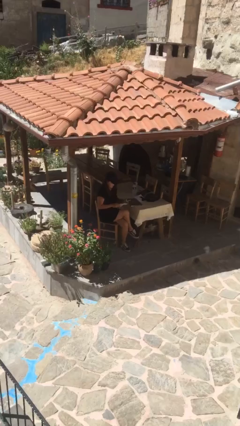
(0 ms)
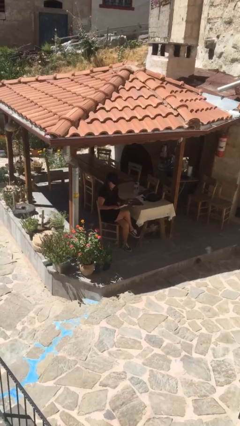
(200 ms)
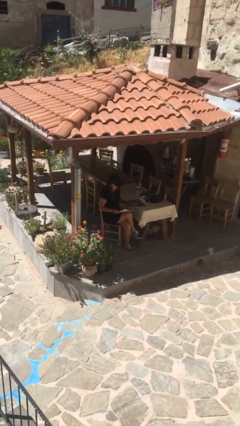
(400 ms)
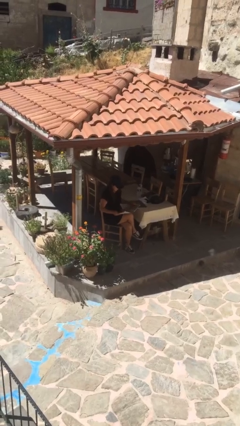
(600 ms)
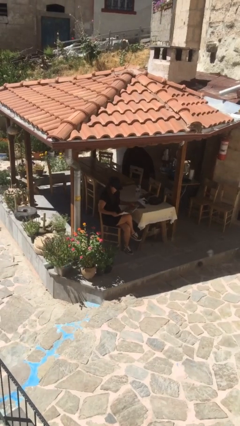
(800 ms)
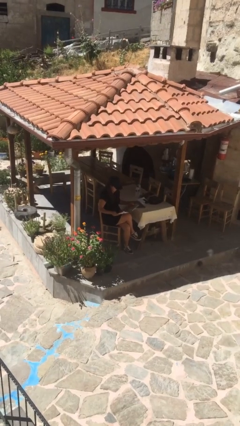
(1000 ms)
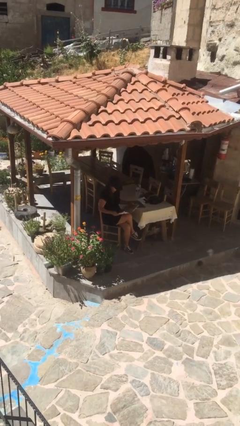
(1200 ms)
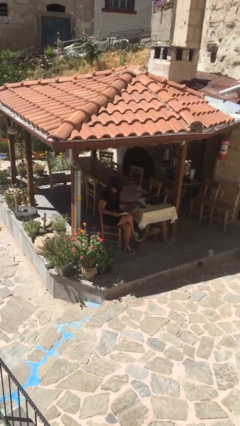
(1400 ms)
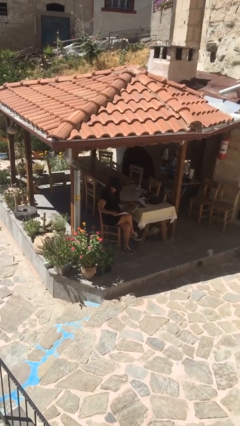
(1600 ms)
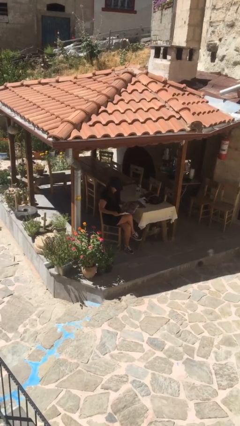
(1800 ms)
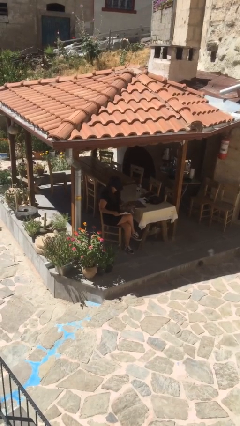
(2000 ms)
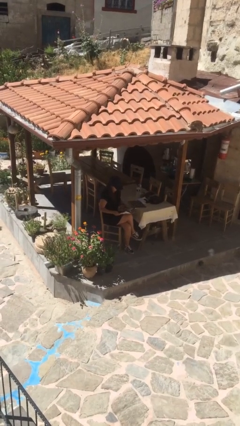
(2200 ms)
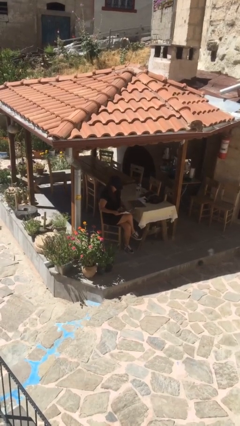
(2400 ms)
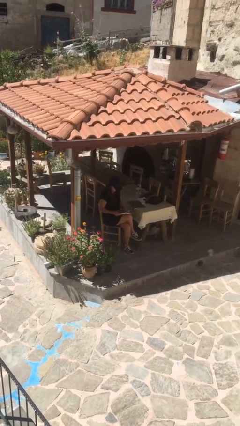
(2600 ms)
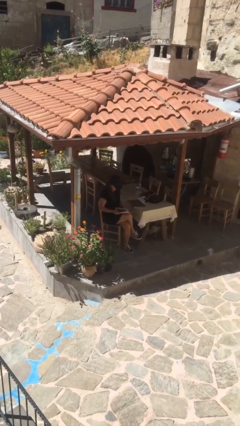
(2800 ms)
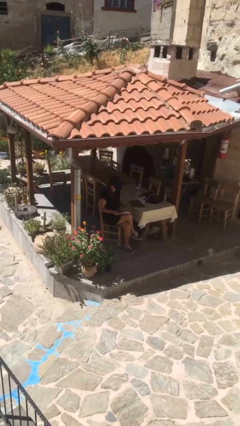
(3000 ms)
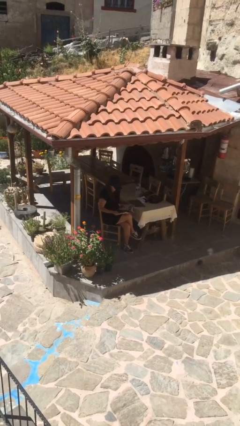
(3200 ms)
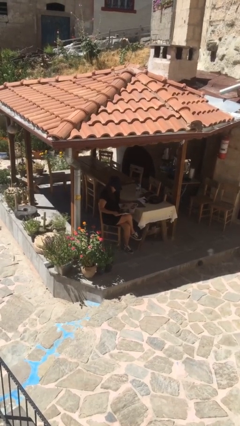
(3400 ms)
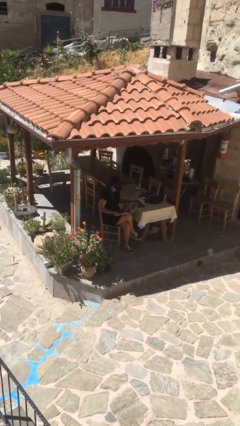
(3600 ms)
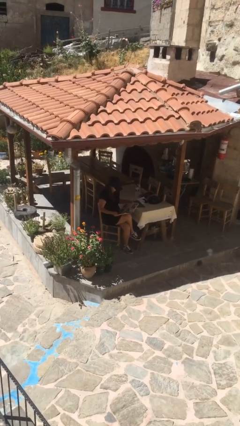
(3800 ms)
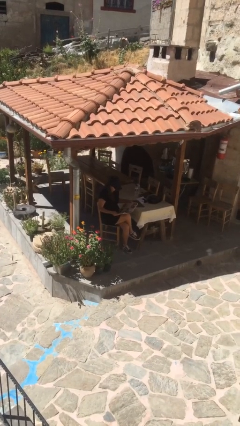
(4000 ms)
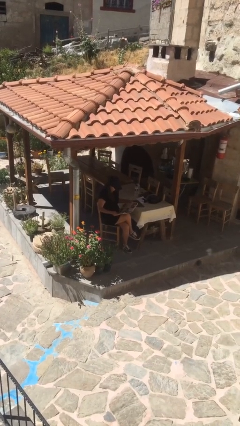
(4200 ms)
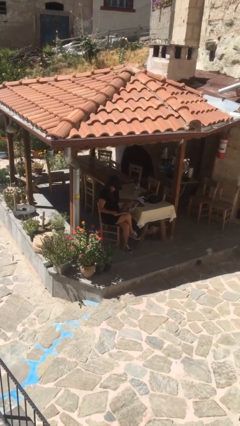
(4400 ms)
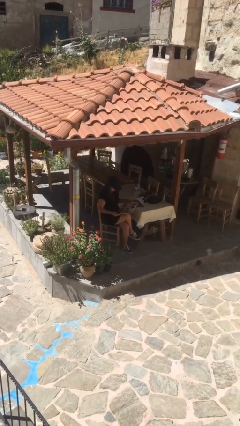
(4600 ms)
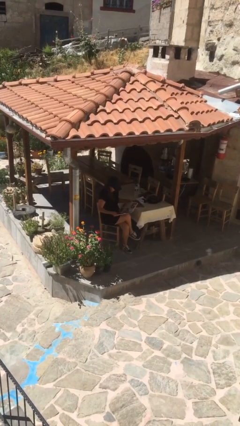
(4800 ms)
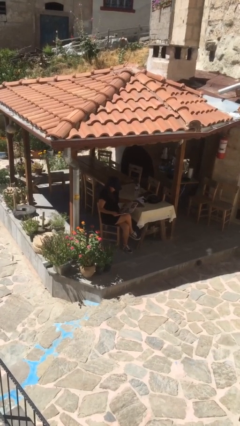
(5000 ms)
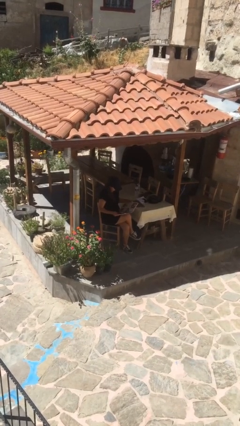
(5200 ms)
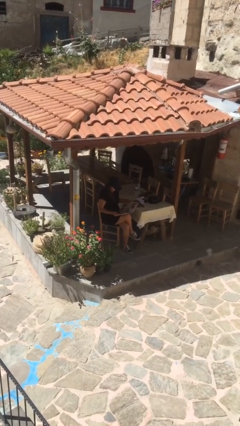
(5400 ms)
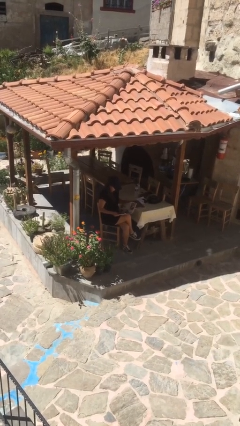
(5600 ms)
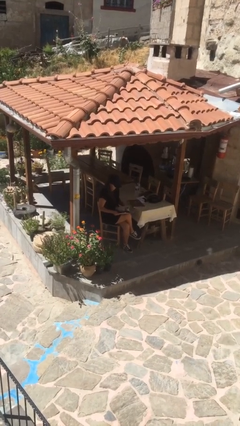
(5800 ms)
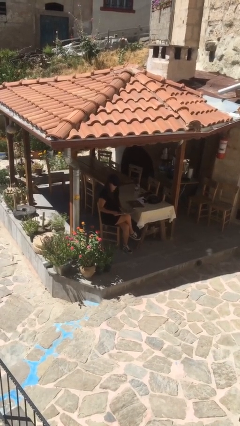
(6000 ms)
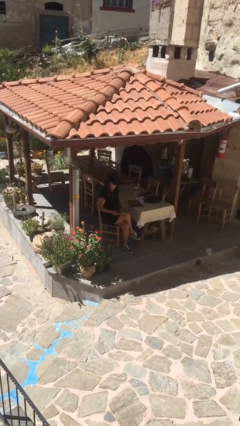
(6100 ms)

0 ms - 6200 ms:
person reads document

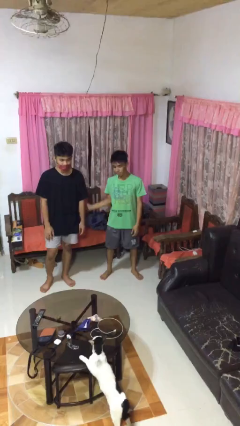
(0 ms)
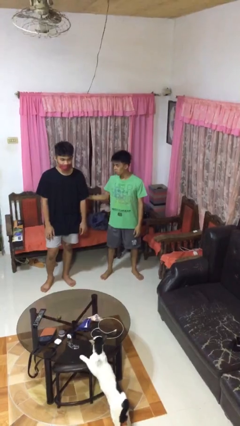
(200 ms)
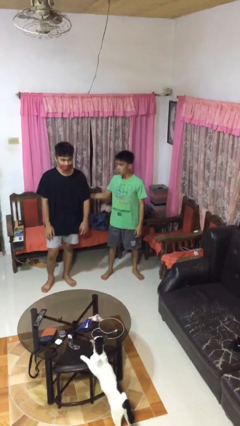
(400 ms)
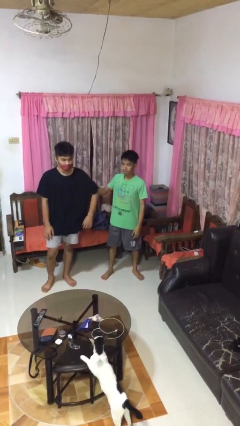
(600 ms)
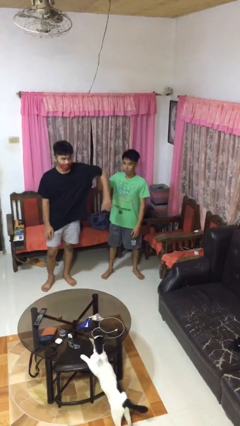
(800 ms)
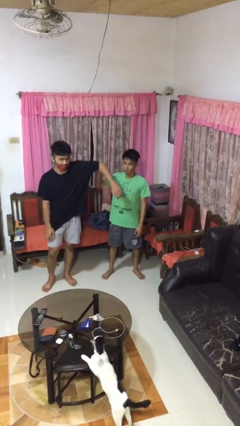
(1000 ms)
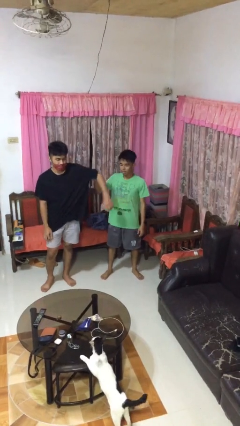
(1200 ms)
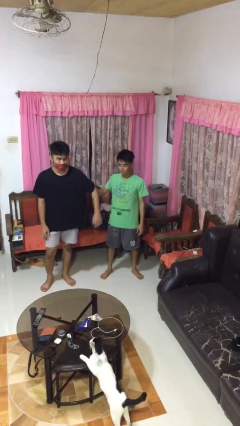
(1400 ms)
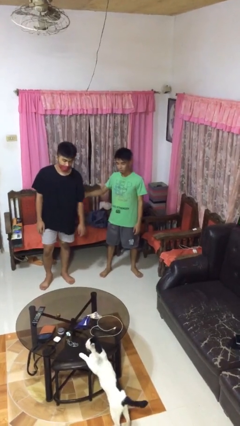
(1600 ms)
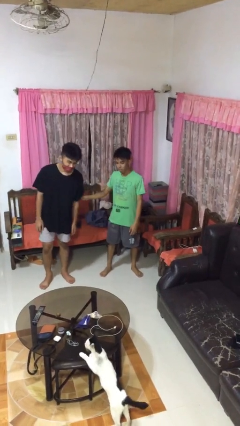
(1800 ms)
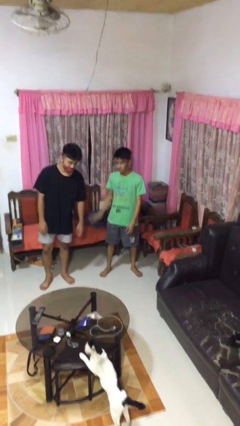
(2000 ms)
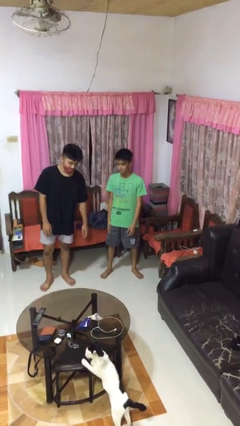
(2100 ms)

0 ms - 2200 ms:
person grabs person by bicep

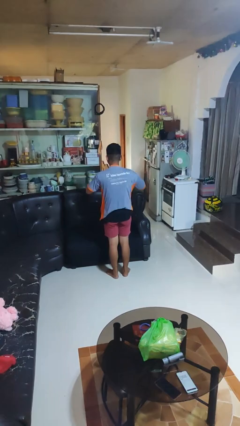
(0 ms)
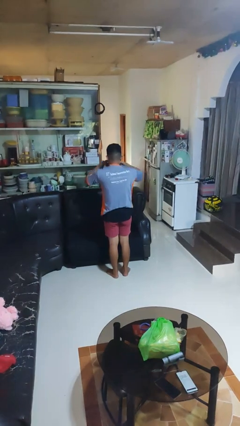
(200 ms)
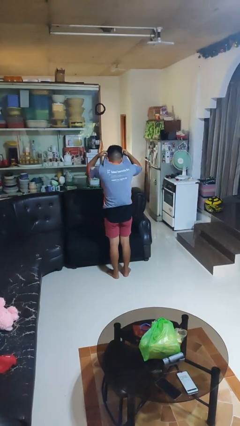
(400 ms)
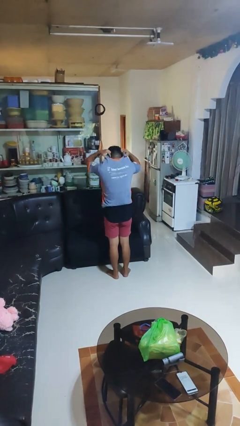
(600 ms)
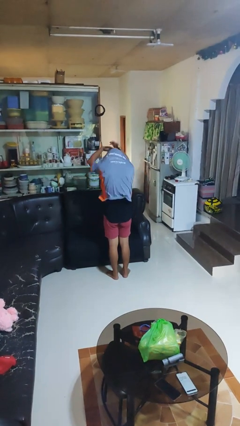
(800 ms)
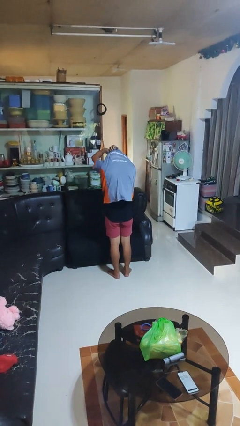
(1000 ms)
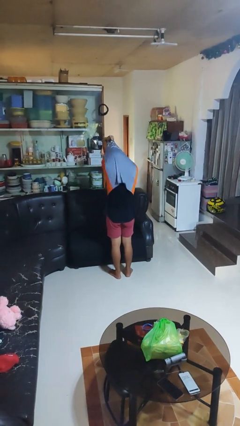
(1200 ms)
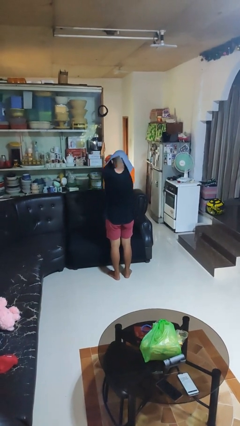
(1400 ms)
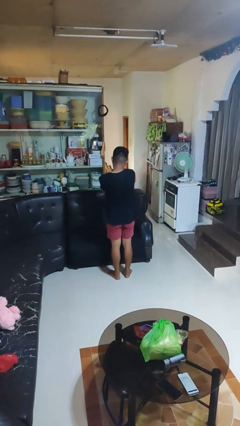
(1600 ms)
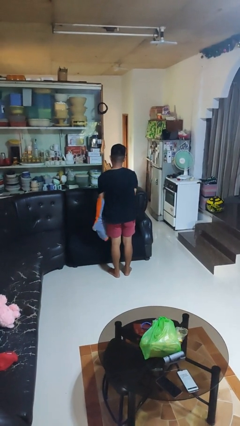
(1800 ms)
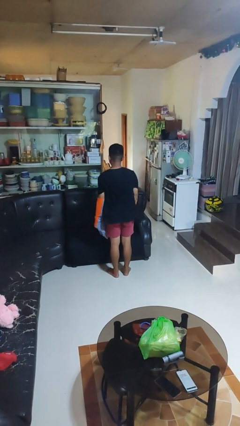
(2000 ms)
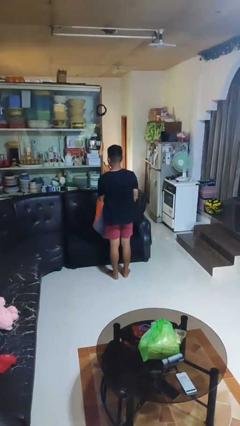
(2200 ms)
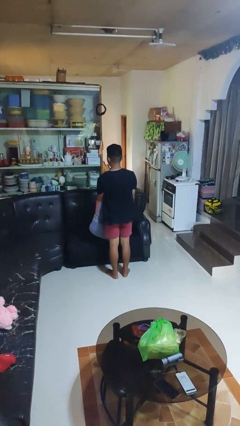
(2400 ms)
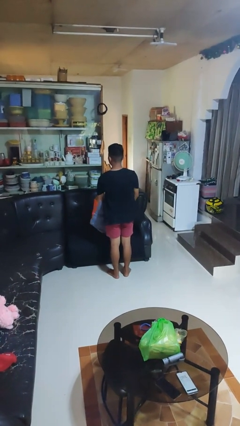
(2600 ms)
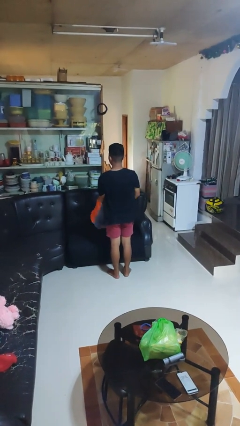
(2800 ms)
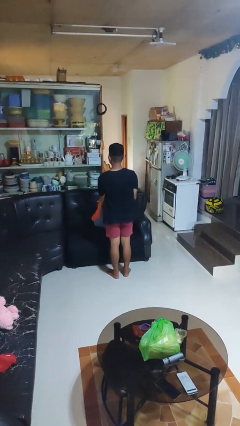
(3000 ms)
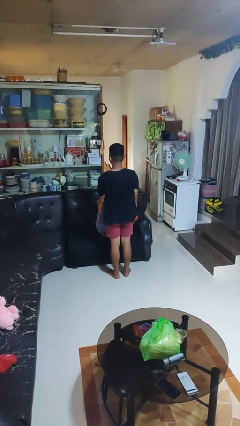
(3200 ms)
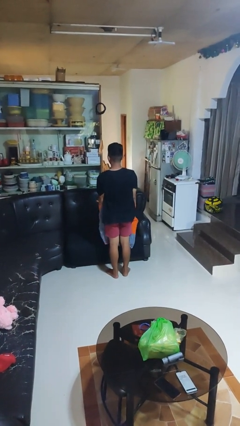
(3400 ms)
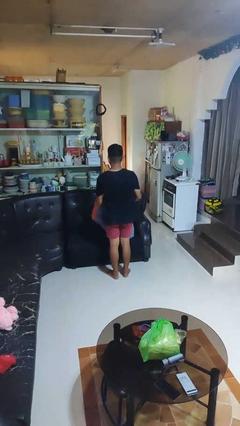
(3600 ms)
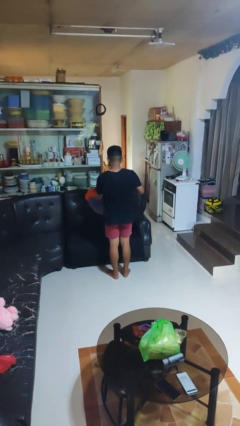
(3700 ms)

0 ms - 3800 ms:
person takes off shirt

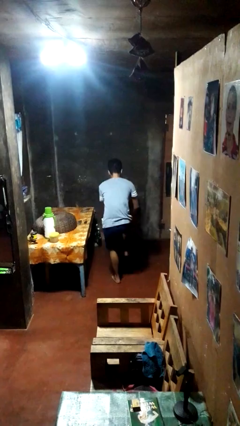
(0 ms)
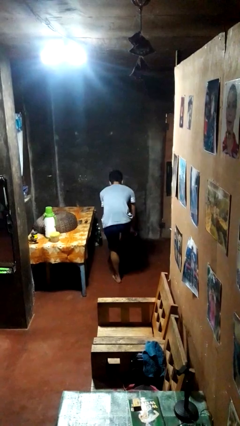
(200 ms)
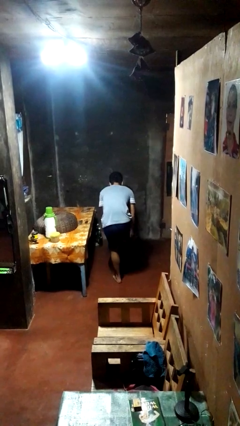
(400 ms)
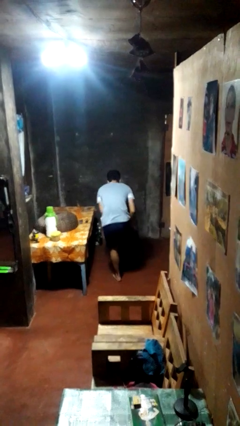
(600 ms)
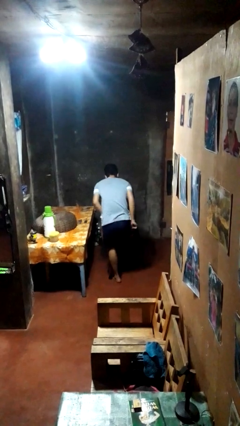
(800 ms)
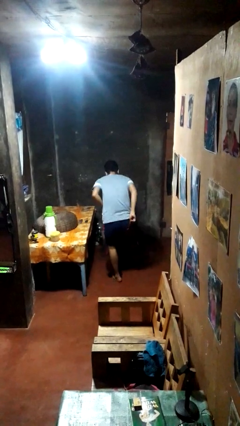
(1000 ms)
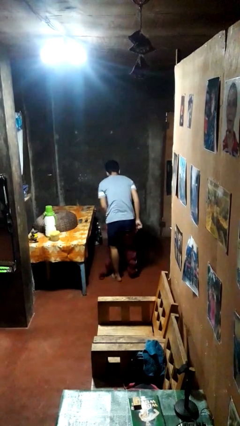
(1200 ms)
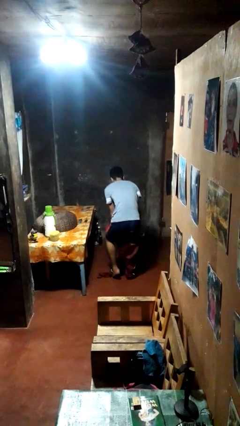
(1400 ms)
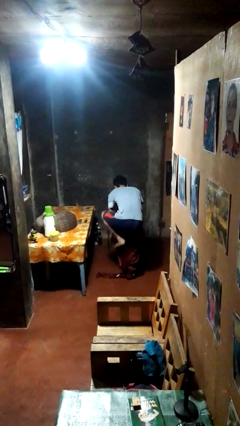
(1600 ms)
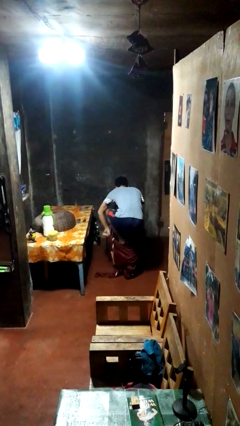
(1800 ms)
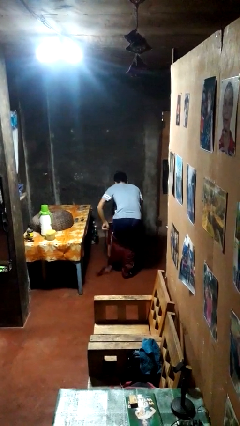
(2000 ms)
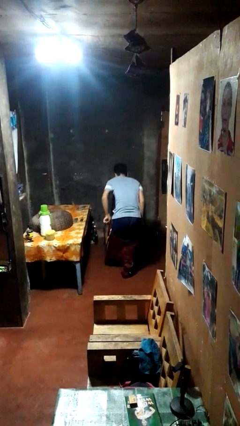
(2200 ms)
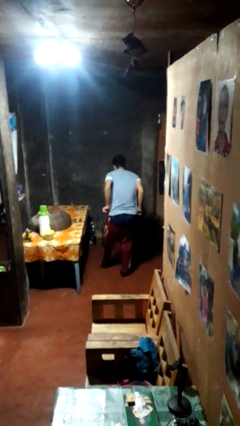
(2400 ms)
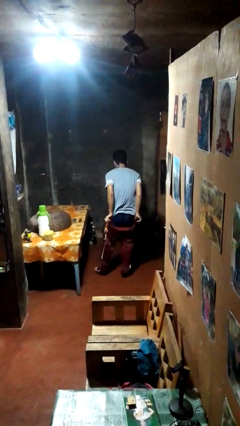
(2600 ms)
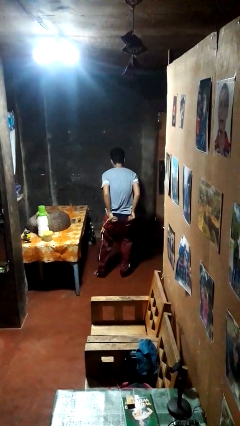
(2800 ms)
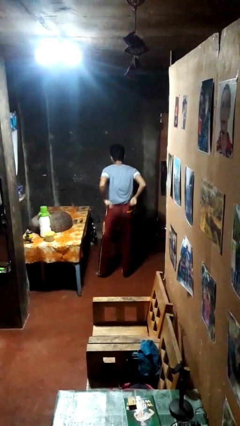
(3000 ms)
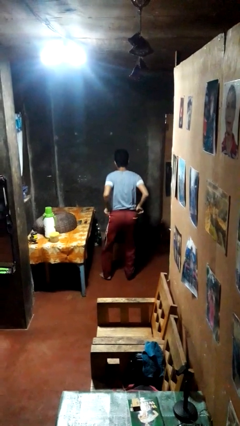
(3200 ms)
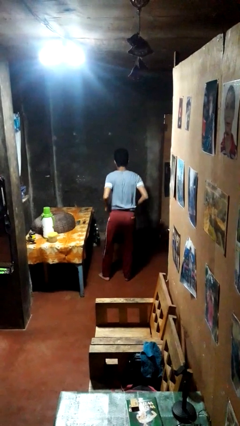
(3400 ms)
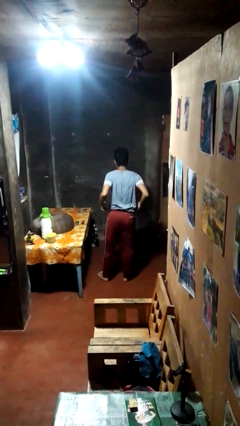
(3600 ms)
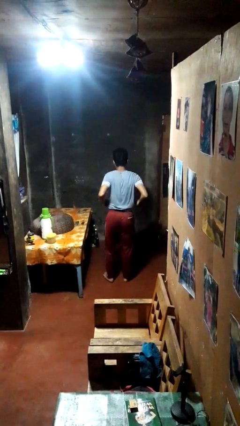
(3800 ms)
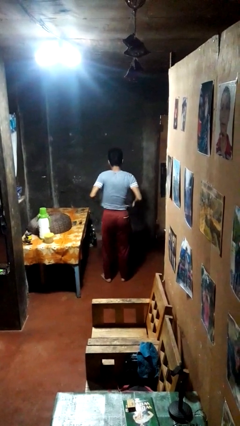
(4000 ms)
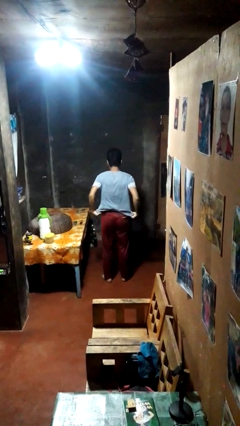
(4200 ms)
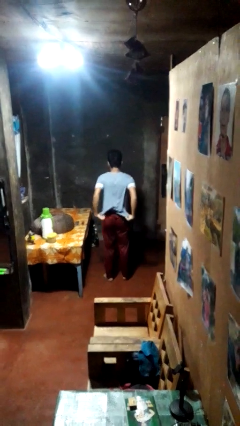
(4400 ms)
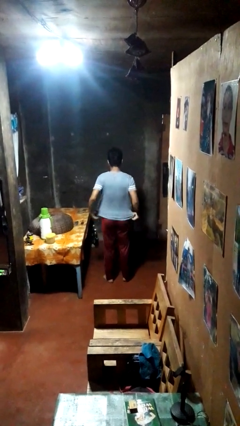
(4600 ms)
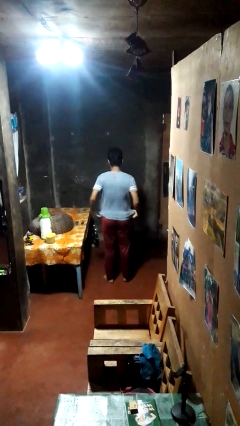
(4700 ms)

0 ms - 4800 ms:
person puts on pants

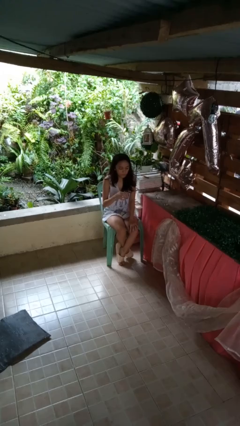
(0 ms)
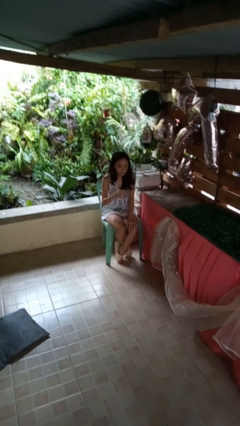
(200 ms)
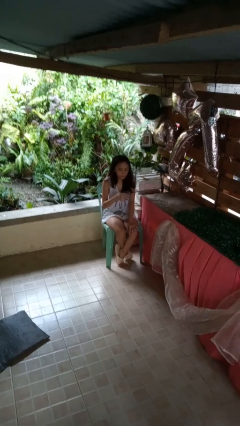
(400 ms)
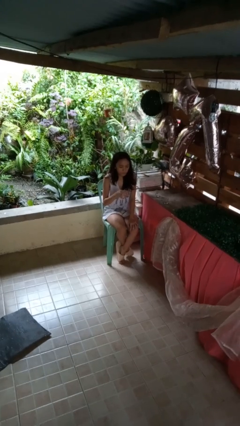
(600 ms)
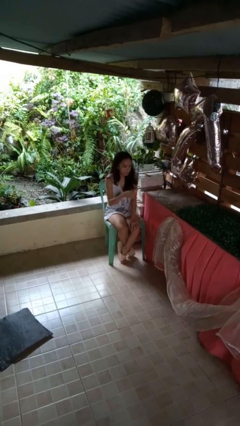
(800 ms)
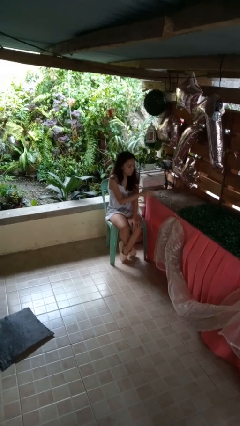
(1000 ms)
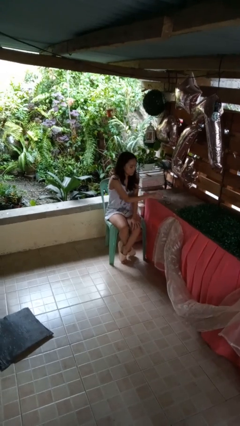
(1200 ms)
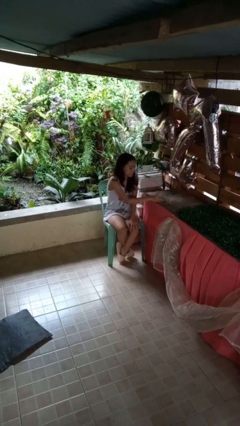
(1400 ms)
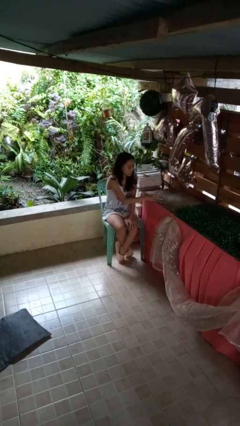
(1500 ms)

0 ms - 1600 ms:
person puts down object on table
